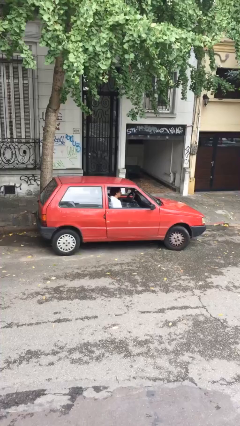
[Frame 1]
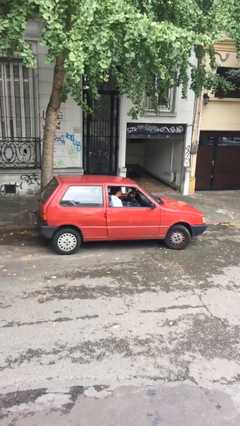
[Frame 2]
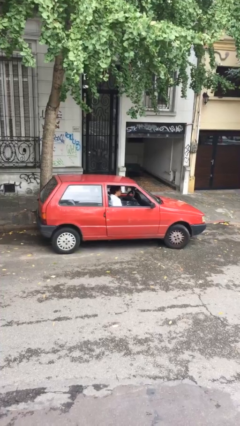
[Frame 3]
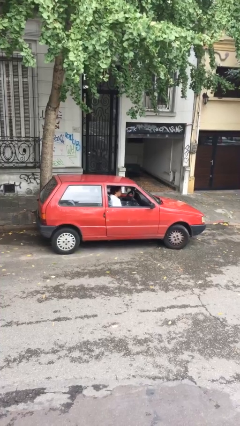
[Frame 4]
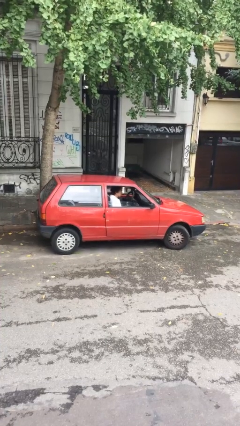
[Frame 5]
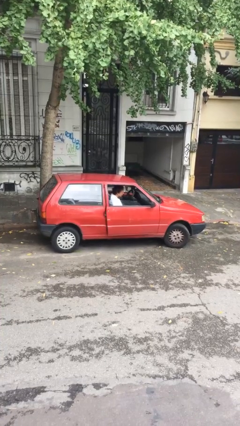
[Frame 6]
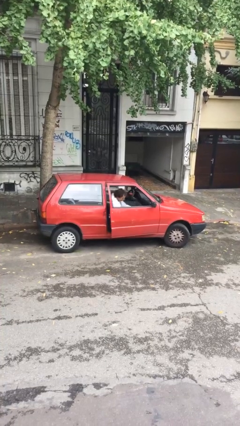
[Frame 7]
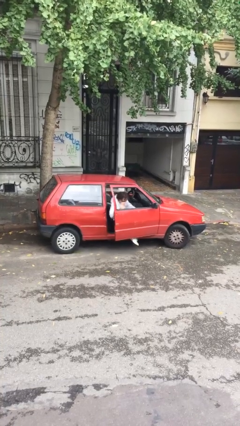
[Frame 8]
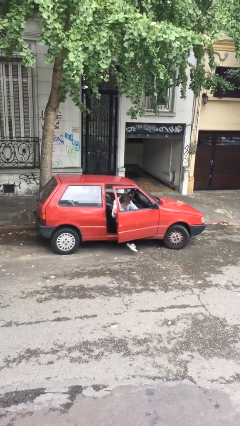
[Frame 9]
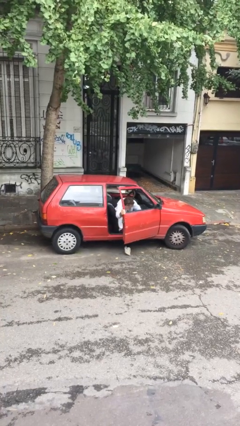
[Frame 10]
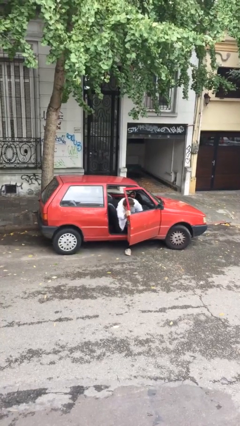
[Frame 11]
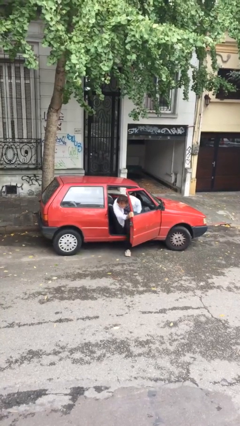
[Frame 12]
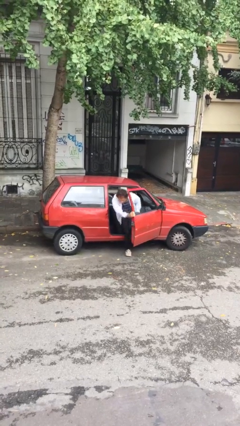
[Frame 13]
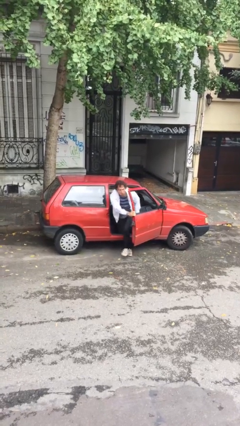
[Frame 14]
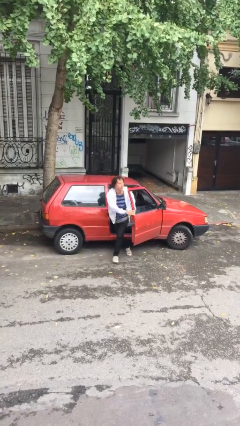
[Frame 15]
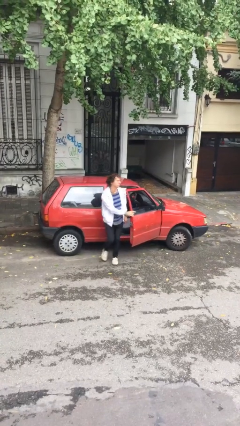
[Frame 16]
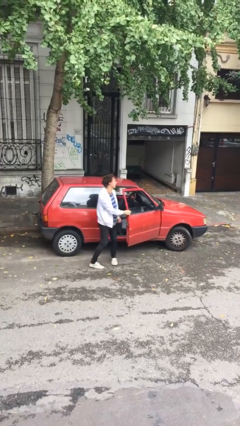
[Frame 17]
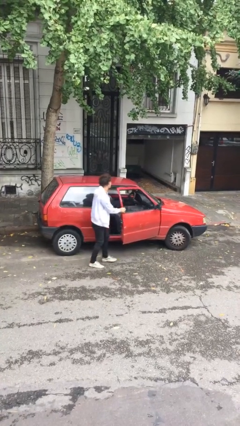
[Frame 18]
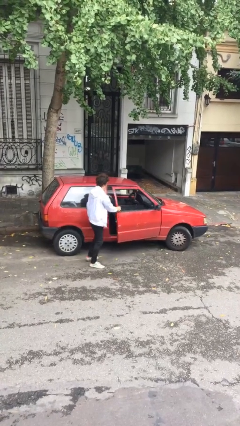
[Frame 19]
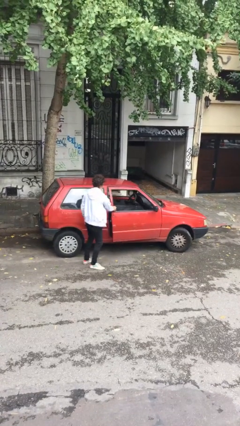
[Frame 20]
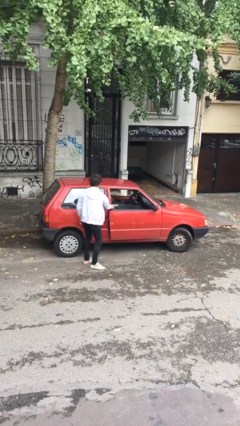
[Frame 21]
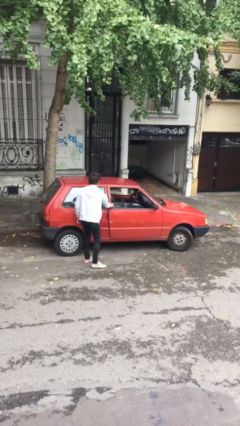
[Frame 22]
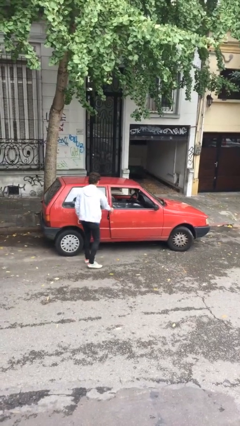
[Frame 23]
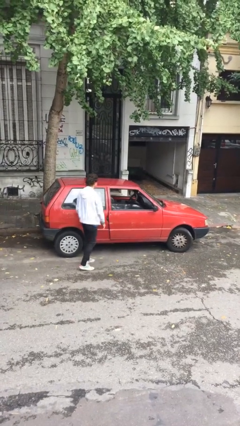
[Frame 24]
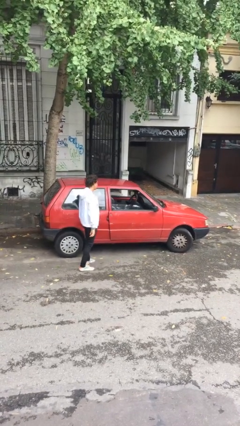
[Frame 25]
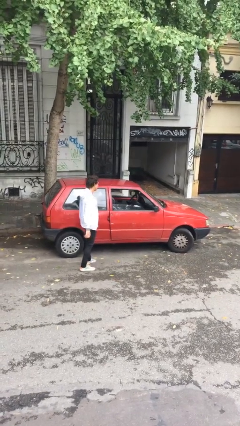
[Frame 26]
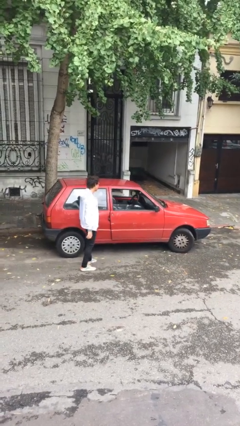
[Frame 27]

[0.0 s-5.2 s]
car drops off person

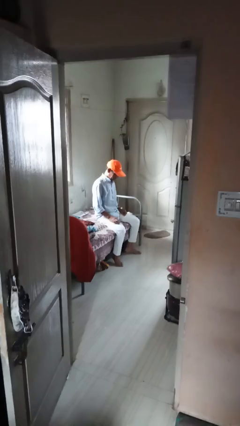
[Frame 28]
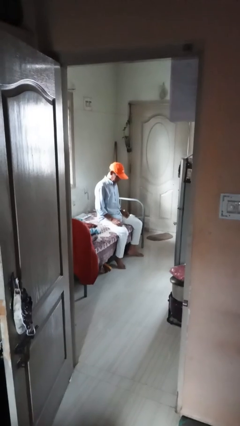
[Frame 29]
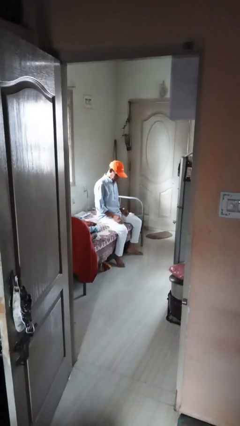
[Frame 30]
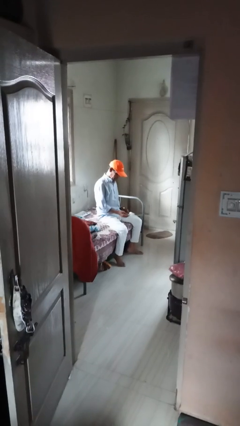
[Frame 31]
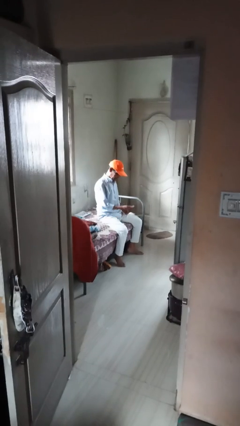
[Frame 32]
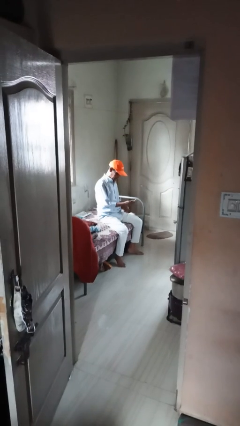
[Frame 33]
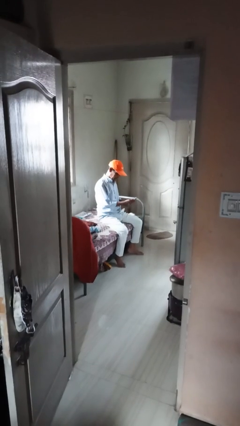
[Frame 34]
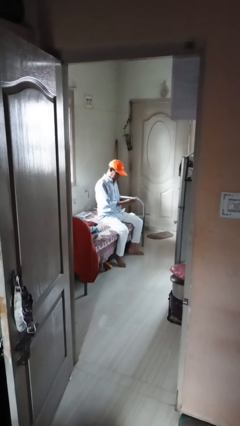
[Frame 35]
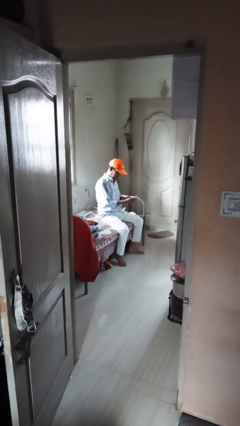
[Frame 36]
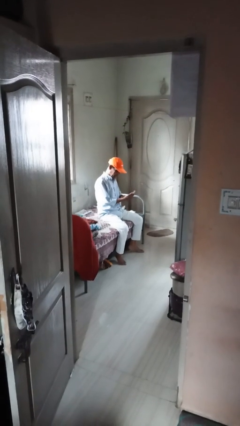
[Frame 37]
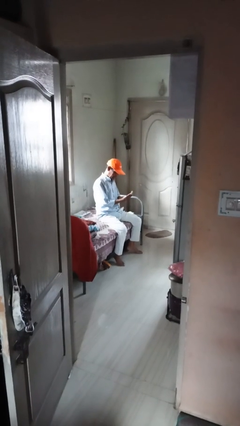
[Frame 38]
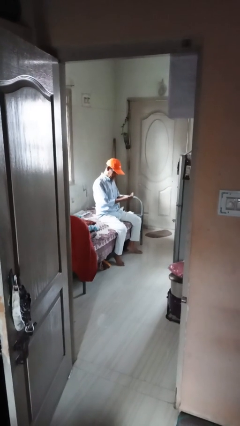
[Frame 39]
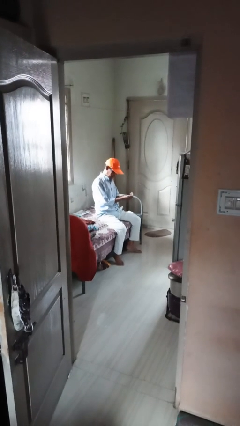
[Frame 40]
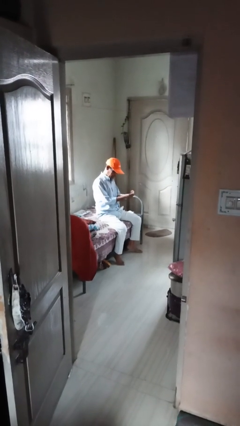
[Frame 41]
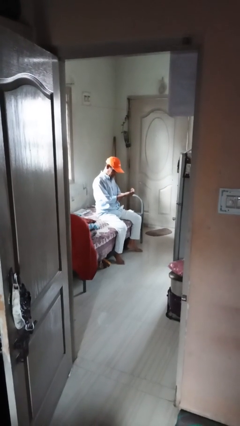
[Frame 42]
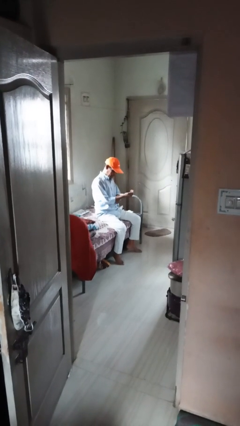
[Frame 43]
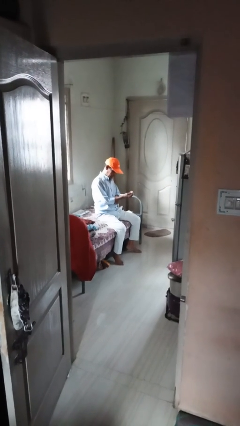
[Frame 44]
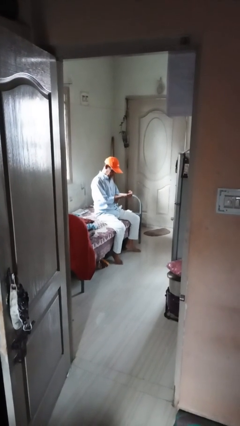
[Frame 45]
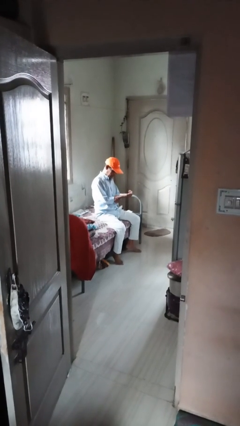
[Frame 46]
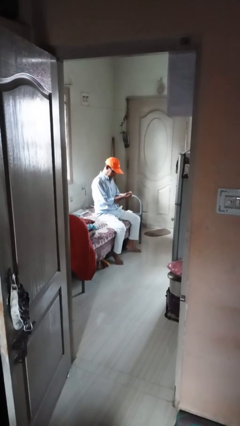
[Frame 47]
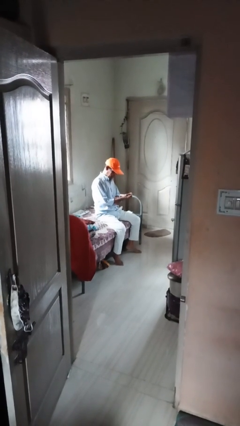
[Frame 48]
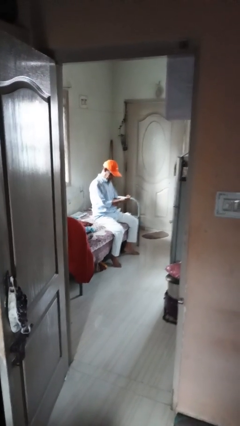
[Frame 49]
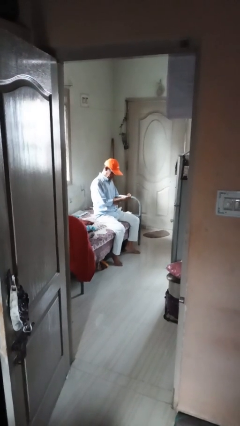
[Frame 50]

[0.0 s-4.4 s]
person looks at hands in lap

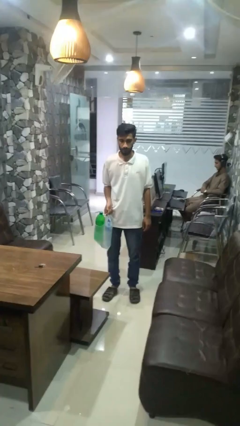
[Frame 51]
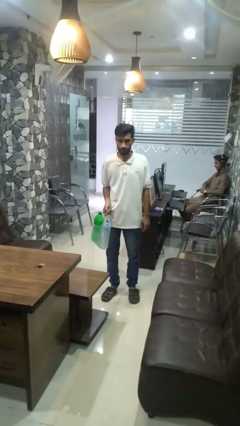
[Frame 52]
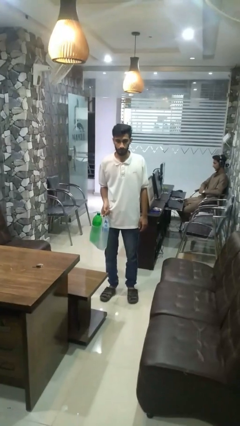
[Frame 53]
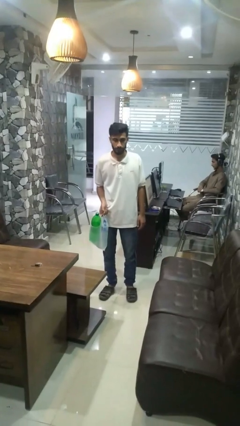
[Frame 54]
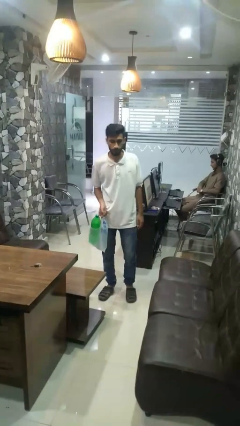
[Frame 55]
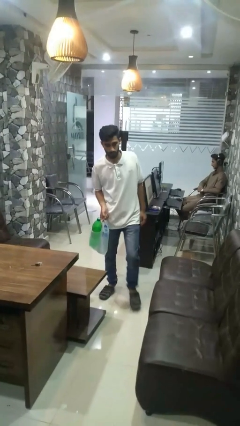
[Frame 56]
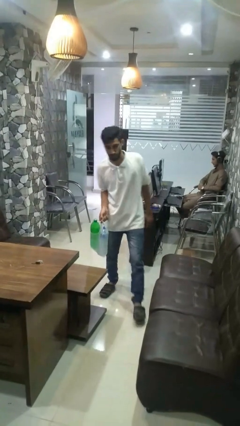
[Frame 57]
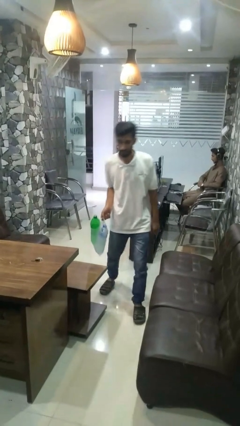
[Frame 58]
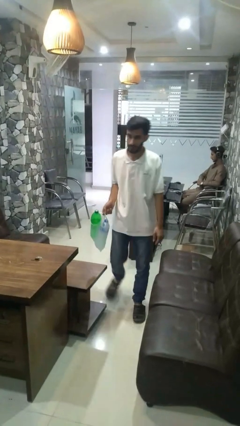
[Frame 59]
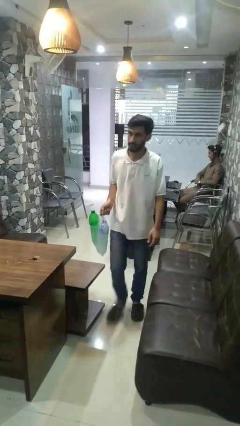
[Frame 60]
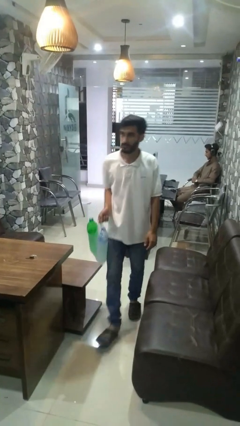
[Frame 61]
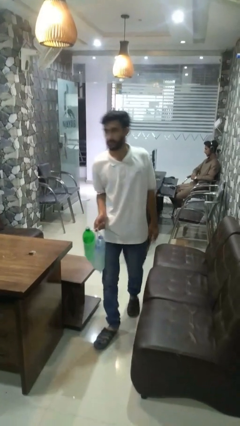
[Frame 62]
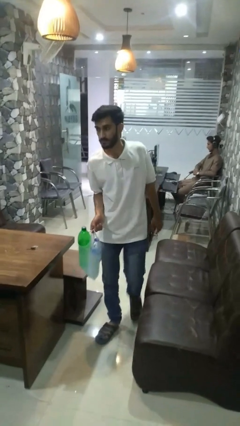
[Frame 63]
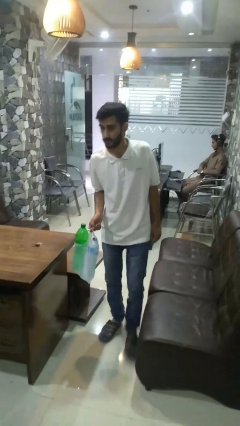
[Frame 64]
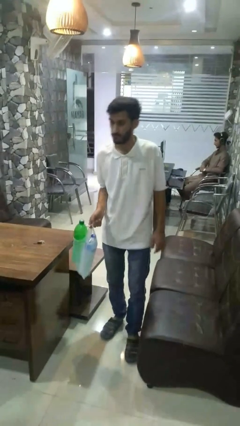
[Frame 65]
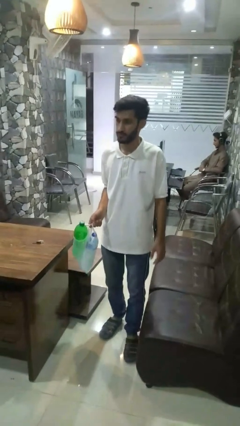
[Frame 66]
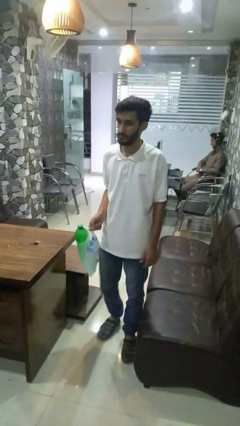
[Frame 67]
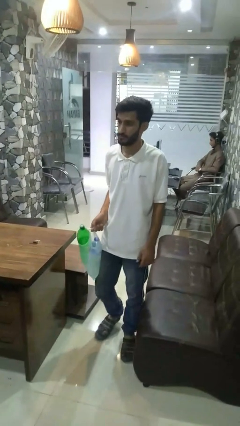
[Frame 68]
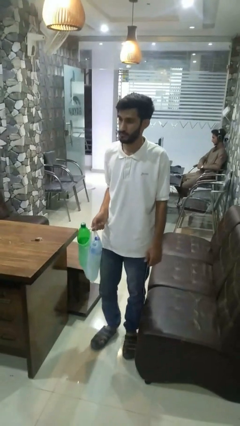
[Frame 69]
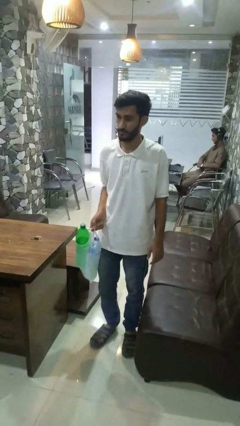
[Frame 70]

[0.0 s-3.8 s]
person carries groceries

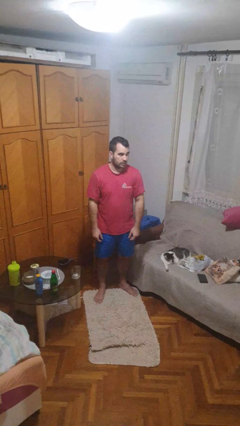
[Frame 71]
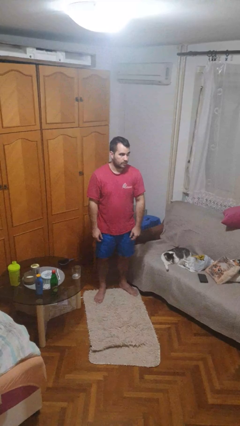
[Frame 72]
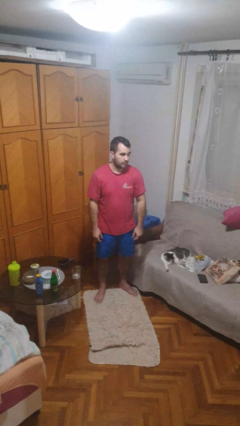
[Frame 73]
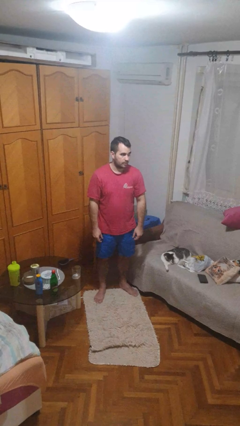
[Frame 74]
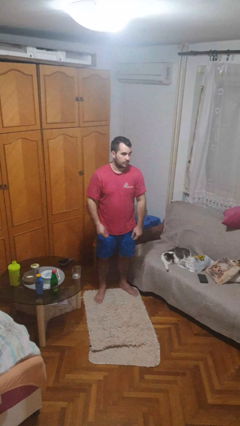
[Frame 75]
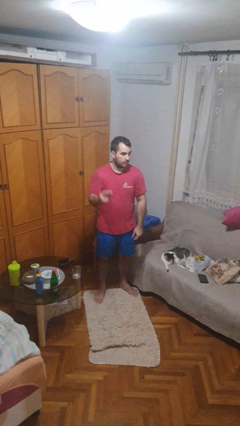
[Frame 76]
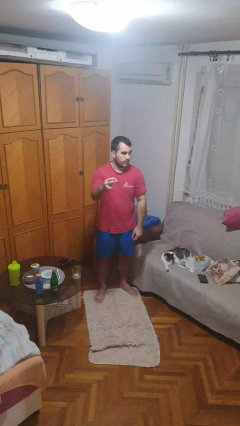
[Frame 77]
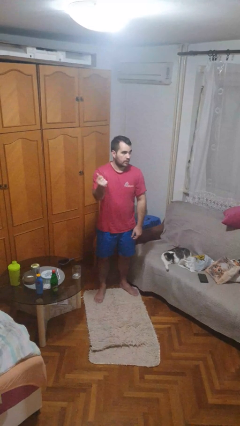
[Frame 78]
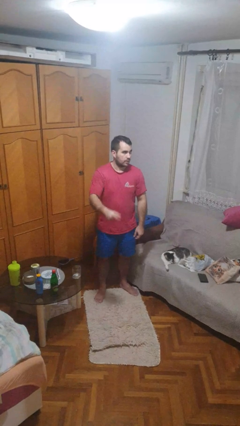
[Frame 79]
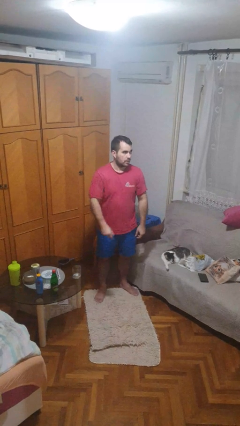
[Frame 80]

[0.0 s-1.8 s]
person snaps fingers

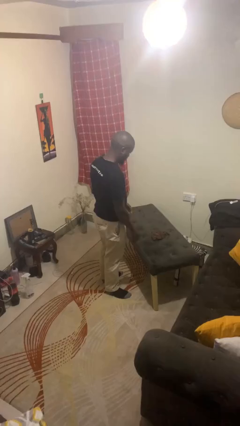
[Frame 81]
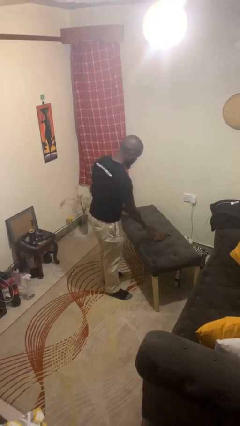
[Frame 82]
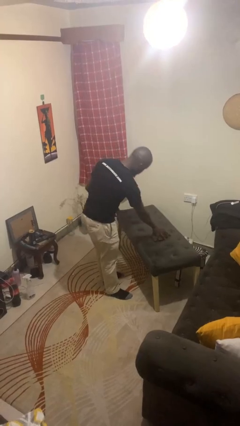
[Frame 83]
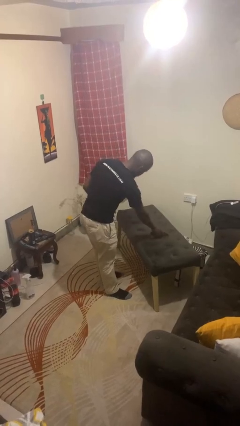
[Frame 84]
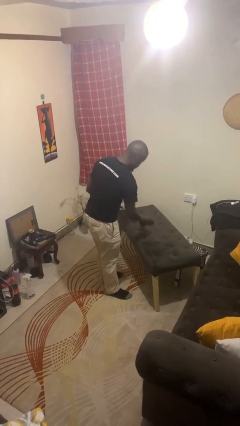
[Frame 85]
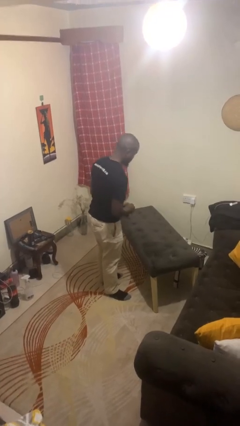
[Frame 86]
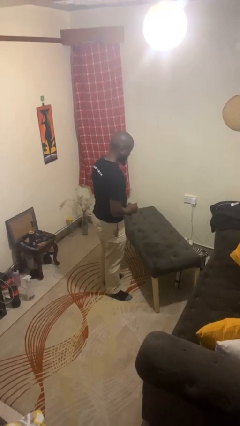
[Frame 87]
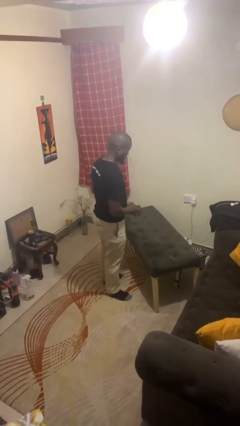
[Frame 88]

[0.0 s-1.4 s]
person picks up object from table

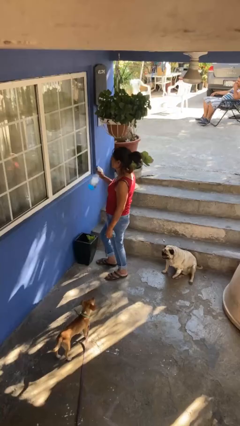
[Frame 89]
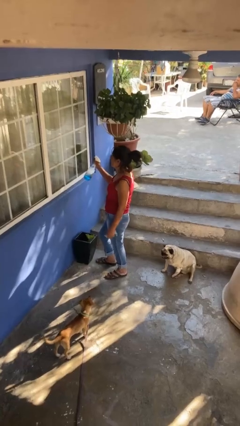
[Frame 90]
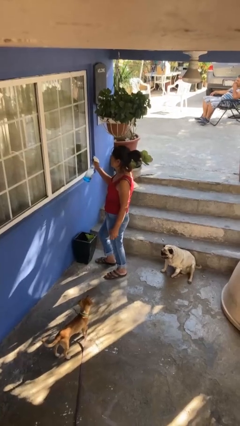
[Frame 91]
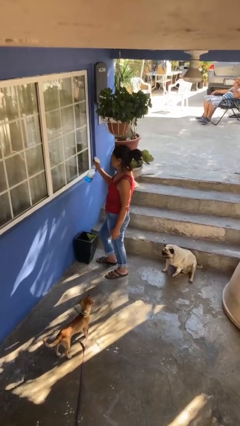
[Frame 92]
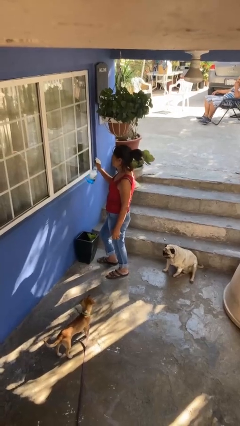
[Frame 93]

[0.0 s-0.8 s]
person sprays from bottle

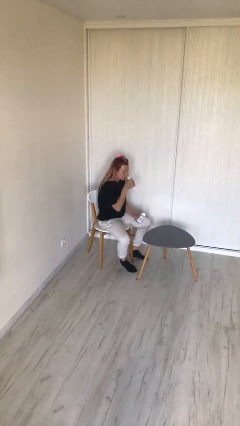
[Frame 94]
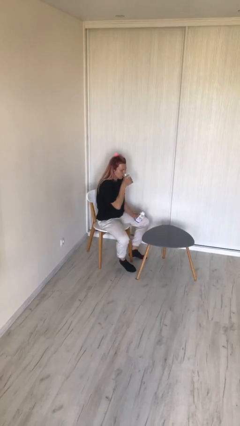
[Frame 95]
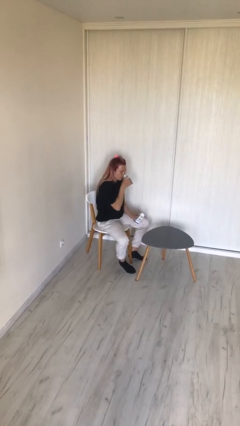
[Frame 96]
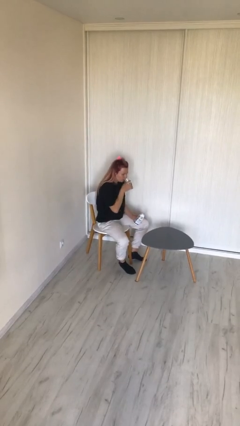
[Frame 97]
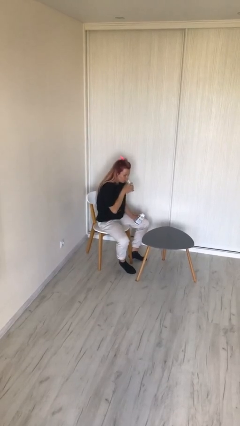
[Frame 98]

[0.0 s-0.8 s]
person drinks from cup
